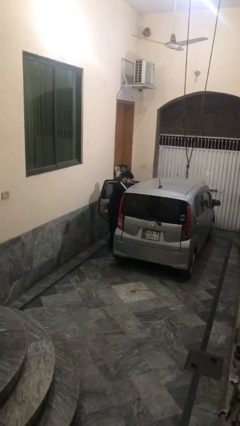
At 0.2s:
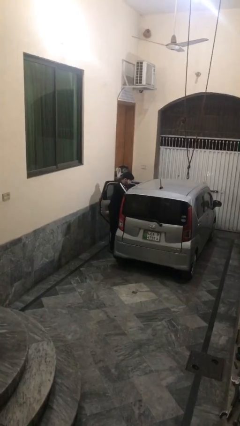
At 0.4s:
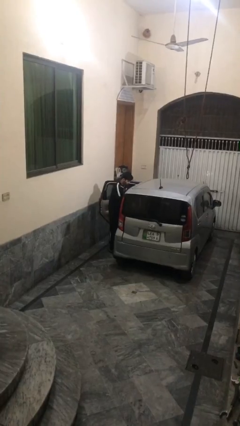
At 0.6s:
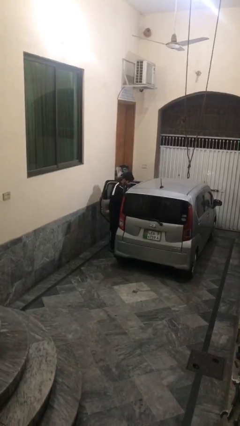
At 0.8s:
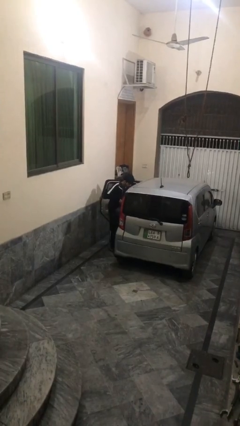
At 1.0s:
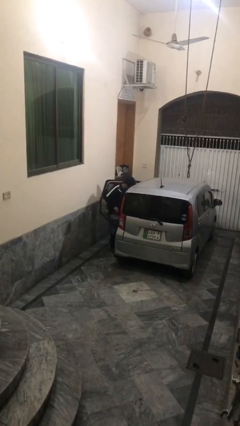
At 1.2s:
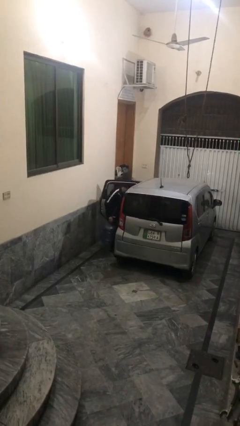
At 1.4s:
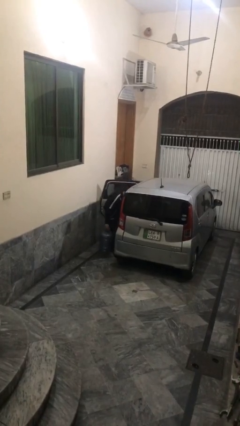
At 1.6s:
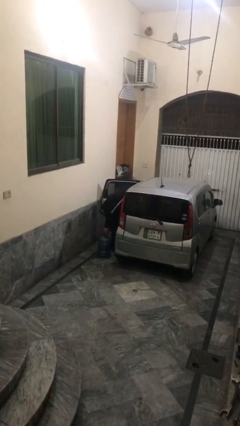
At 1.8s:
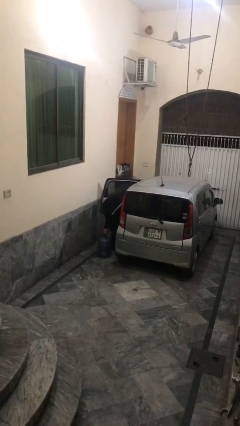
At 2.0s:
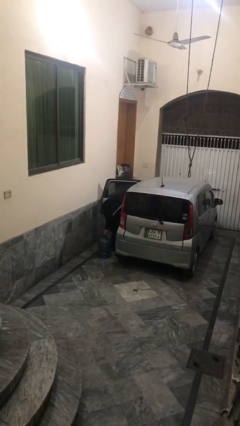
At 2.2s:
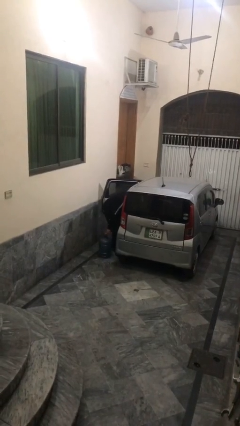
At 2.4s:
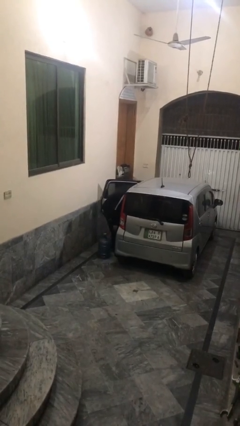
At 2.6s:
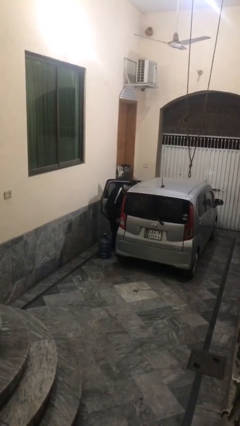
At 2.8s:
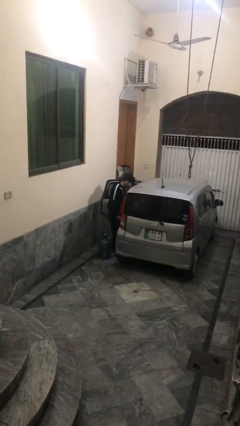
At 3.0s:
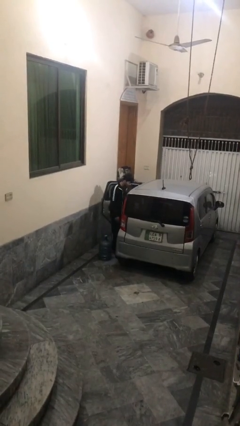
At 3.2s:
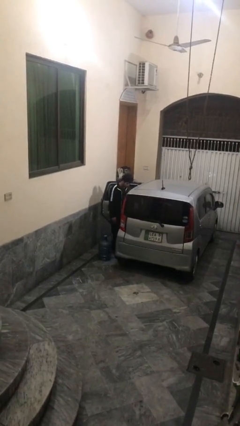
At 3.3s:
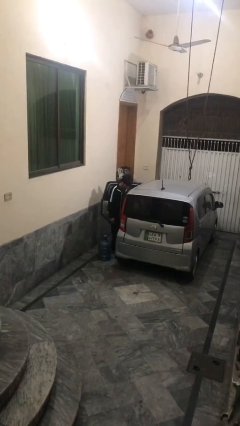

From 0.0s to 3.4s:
person unloads car

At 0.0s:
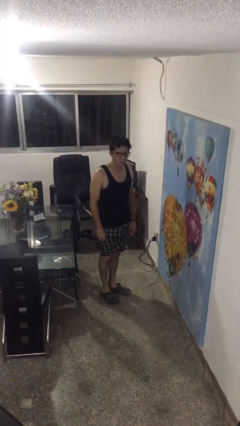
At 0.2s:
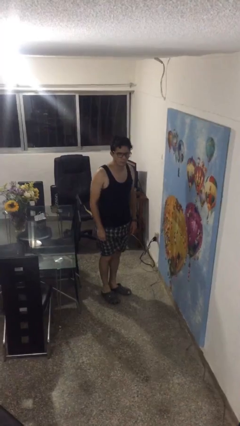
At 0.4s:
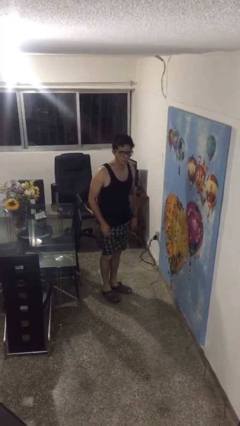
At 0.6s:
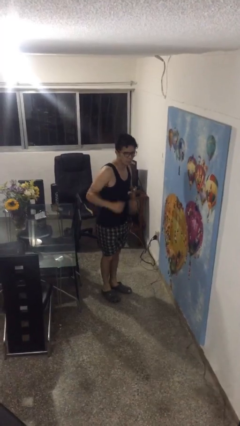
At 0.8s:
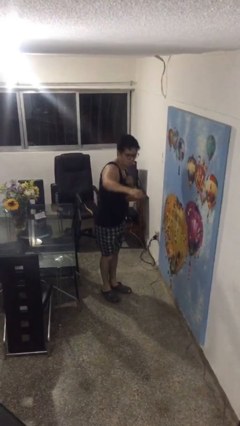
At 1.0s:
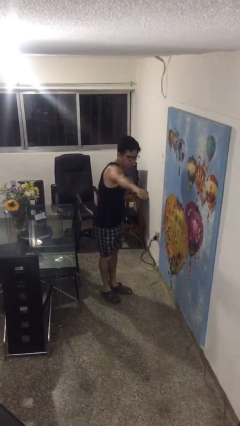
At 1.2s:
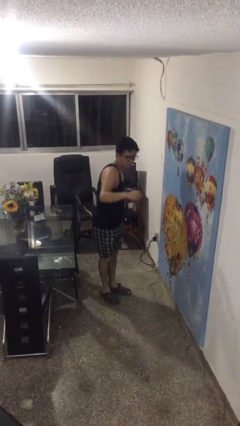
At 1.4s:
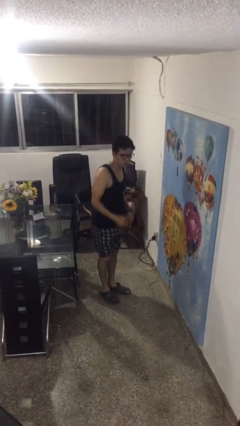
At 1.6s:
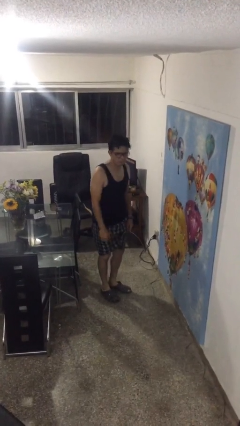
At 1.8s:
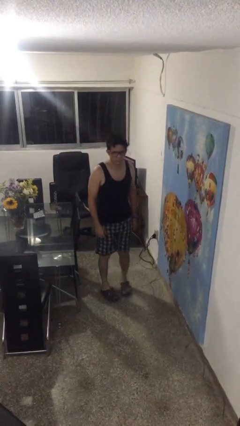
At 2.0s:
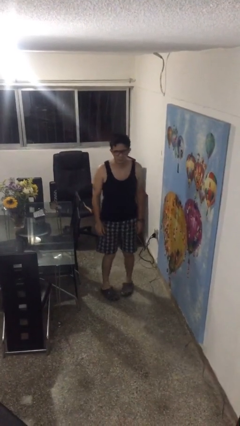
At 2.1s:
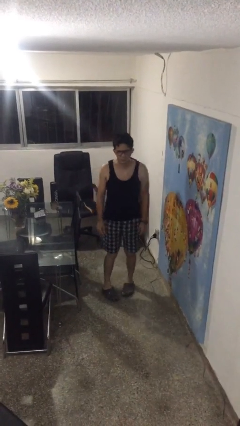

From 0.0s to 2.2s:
person karate chop

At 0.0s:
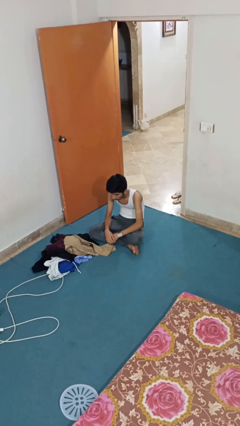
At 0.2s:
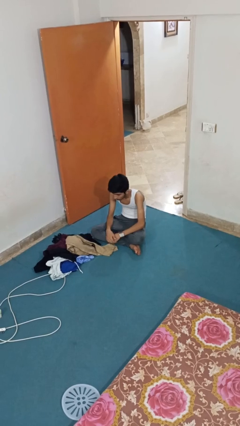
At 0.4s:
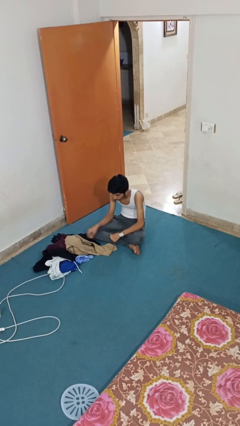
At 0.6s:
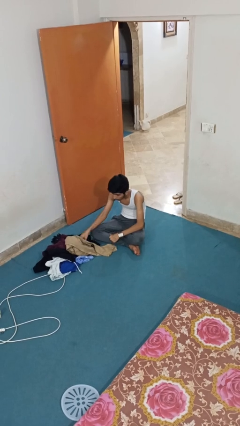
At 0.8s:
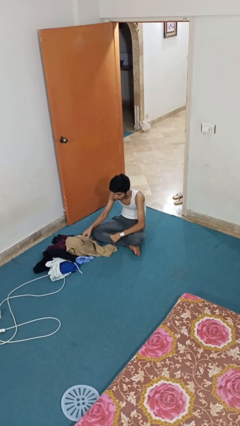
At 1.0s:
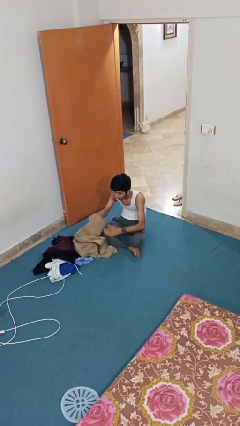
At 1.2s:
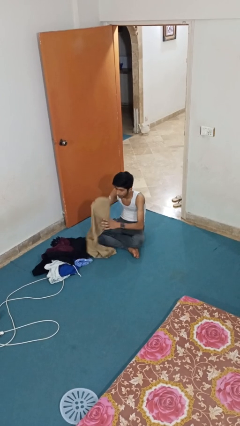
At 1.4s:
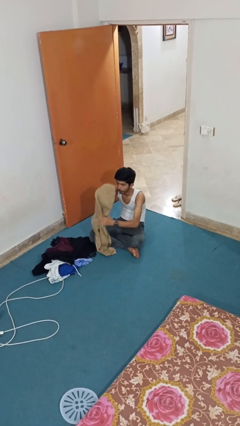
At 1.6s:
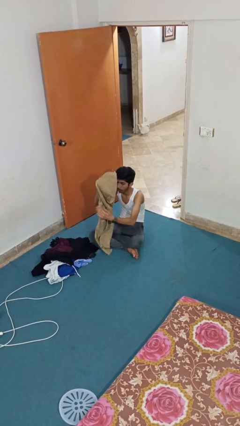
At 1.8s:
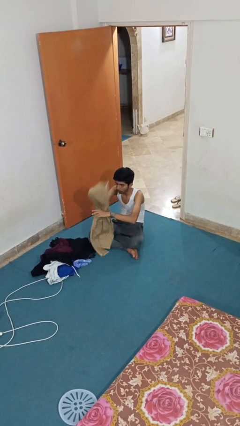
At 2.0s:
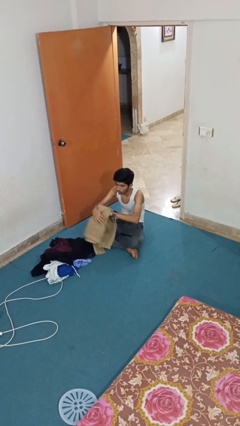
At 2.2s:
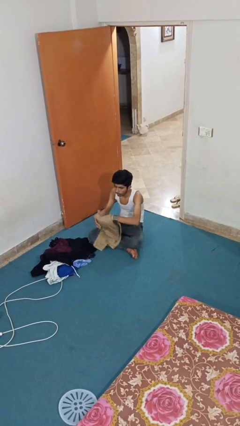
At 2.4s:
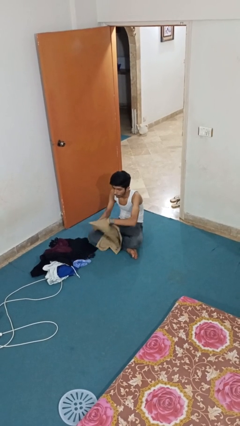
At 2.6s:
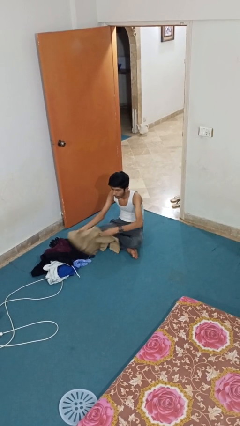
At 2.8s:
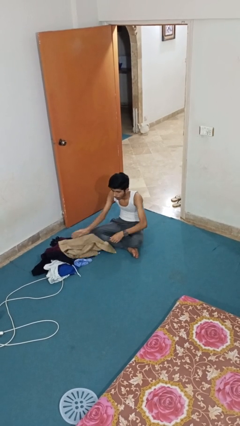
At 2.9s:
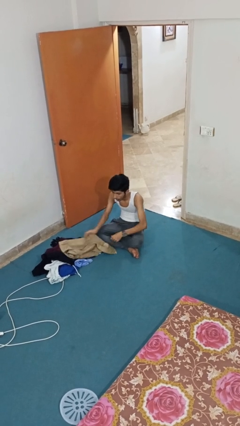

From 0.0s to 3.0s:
person folds pants

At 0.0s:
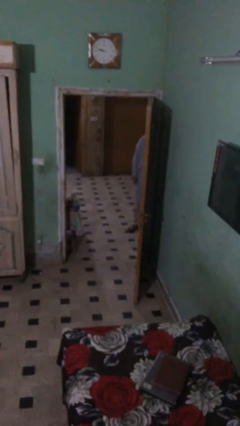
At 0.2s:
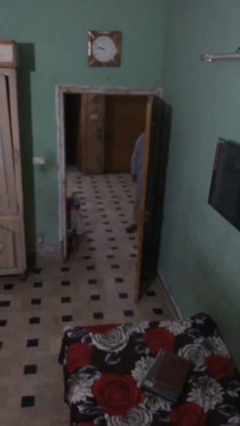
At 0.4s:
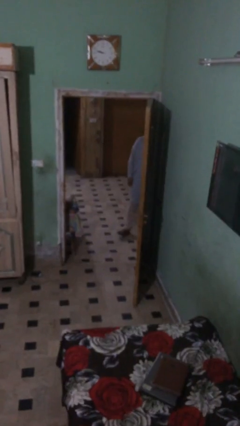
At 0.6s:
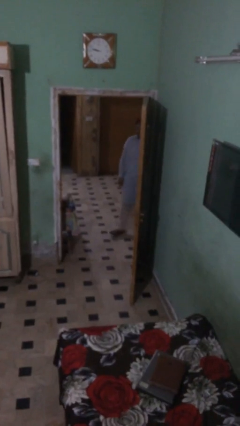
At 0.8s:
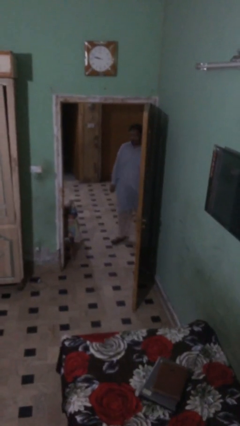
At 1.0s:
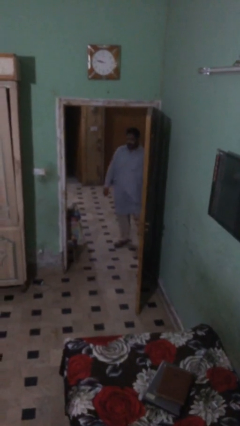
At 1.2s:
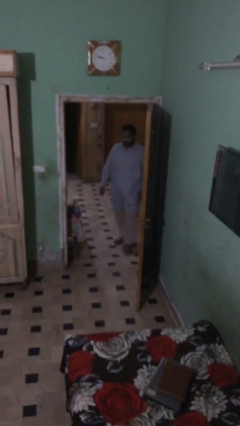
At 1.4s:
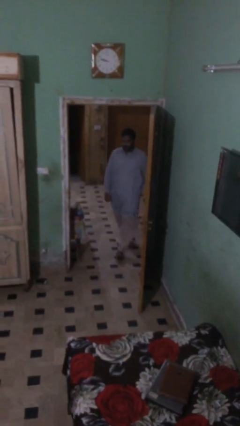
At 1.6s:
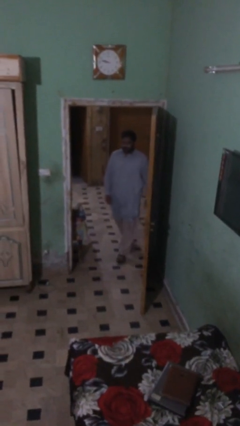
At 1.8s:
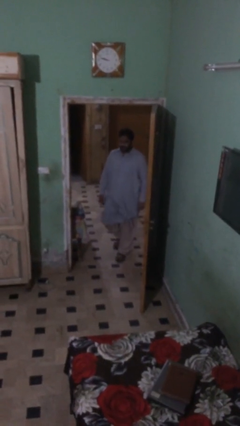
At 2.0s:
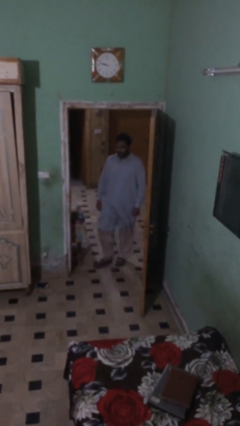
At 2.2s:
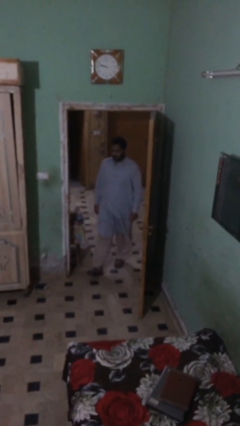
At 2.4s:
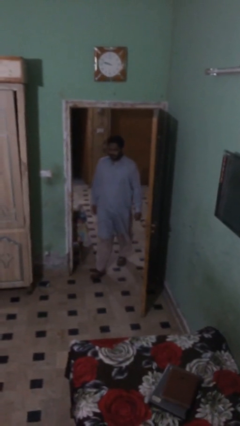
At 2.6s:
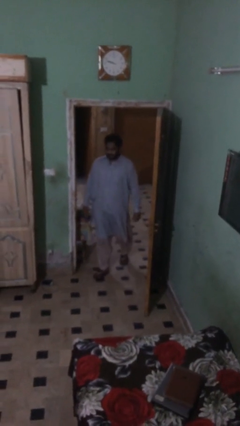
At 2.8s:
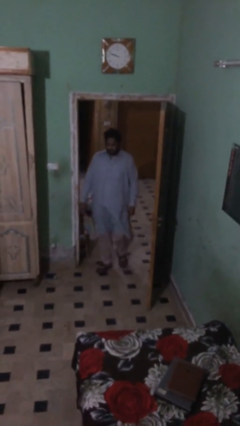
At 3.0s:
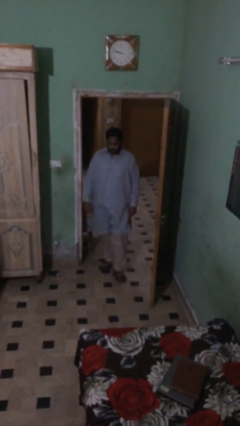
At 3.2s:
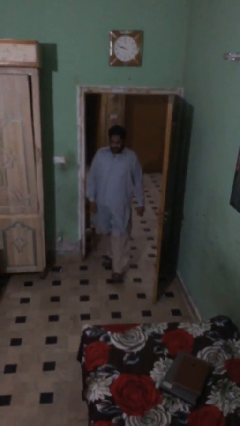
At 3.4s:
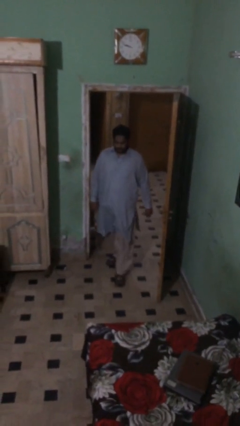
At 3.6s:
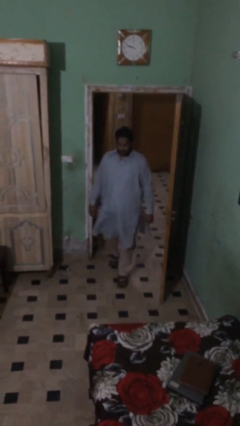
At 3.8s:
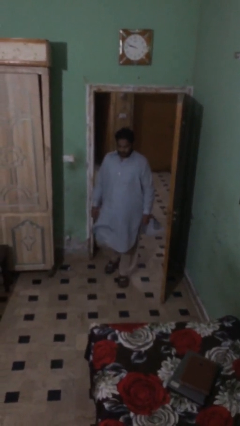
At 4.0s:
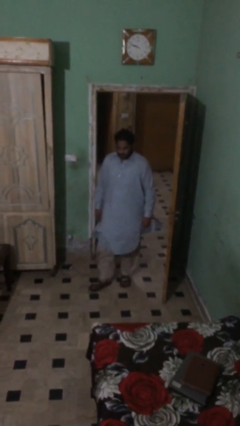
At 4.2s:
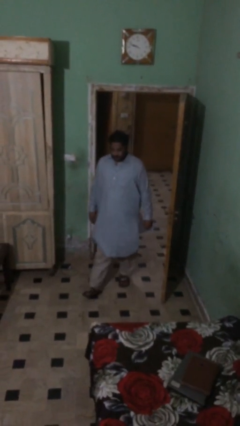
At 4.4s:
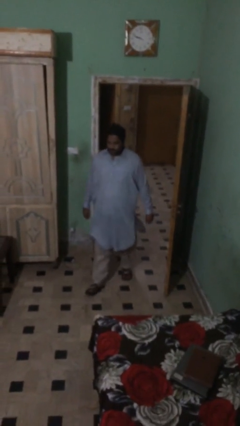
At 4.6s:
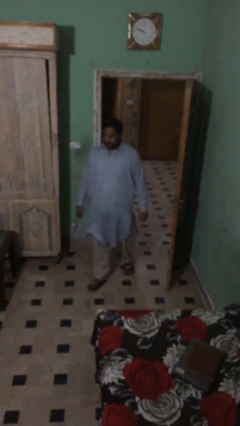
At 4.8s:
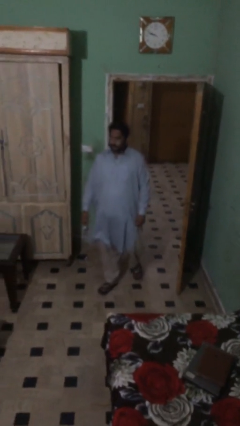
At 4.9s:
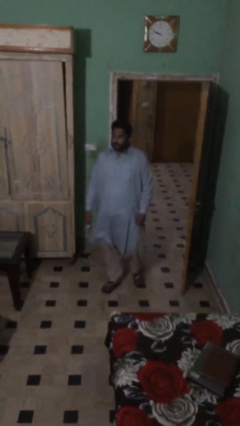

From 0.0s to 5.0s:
person enters scene through structure

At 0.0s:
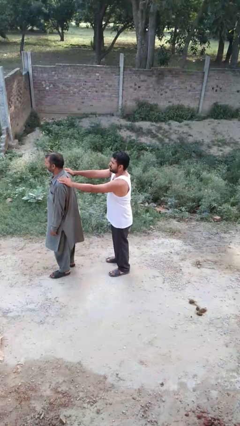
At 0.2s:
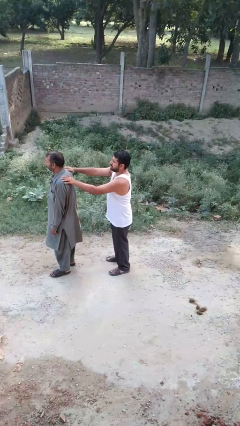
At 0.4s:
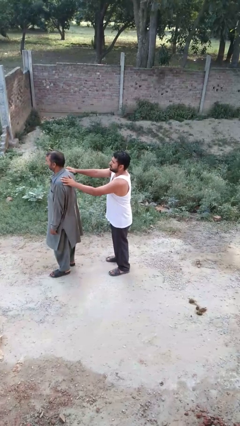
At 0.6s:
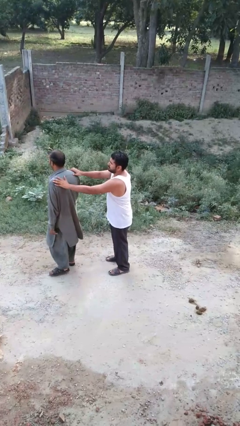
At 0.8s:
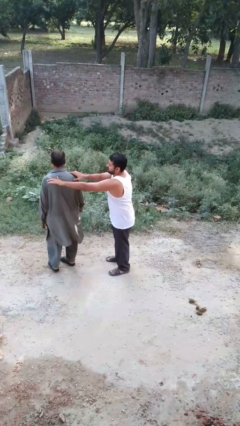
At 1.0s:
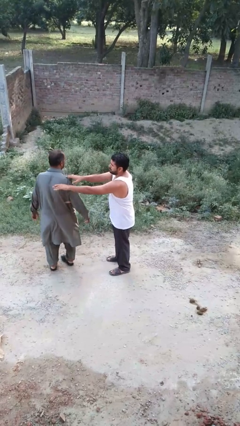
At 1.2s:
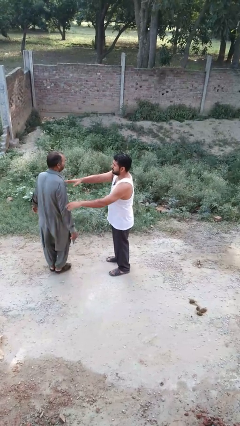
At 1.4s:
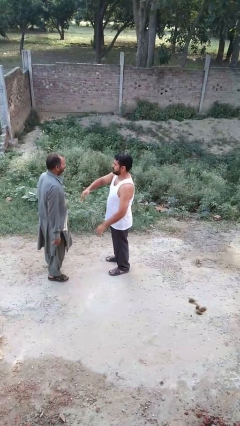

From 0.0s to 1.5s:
person spins person around

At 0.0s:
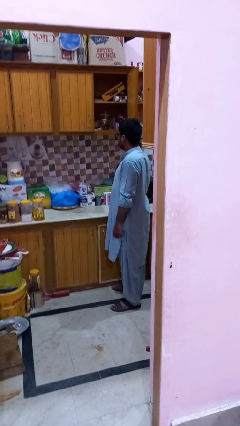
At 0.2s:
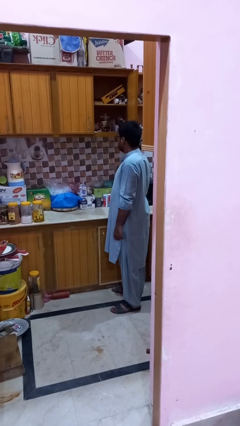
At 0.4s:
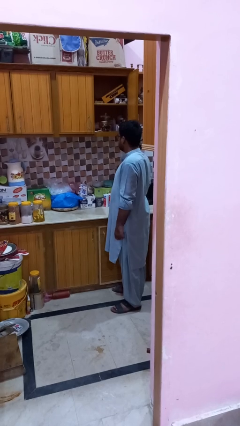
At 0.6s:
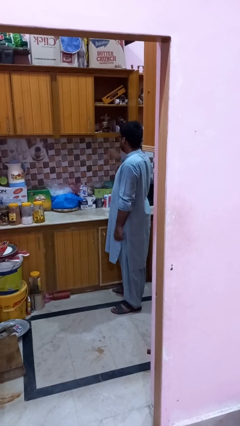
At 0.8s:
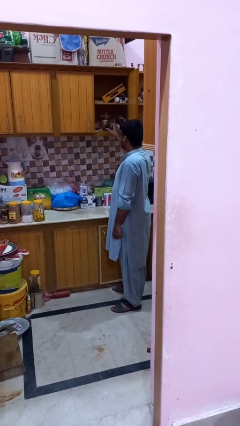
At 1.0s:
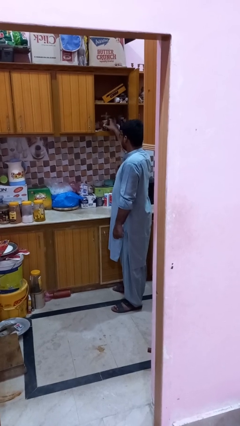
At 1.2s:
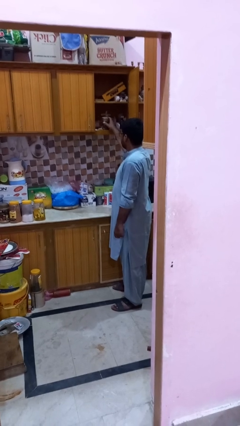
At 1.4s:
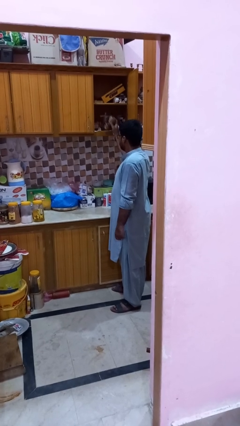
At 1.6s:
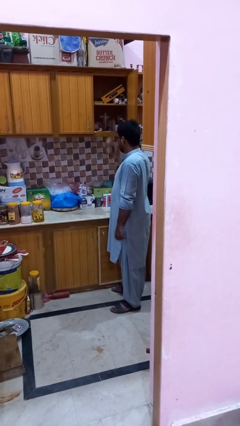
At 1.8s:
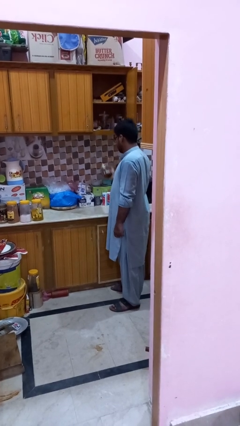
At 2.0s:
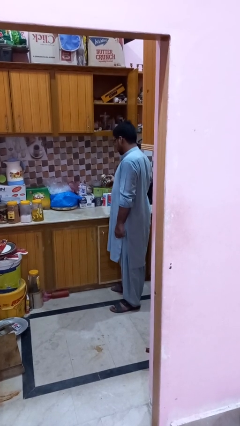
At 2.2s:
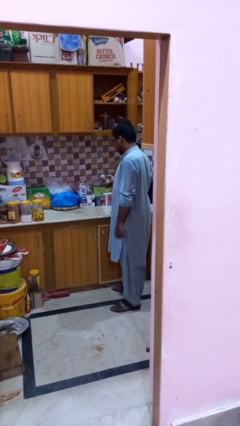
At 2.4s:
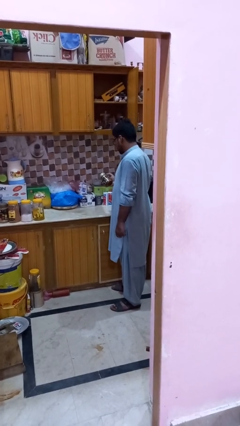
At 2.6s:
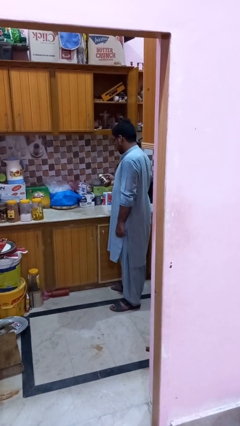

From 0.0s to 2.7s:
person picks up object from cabinet
